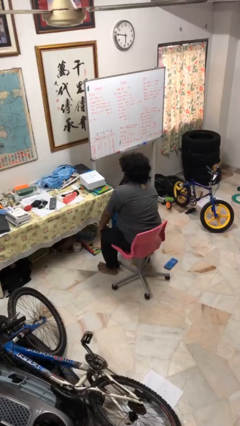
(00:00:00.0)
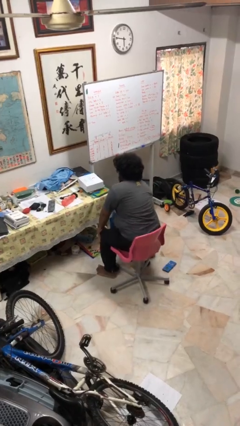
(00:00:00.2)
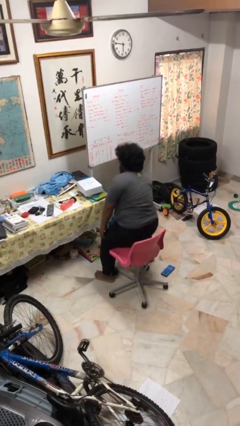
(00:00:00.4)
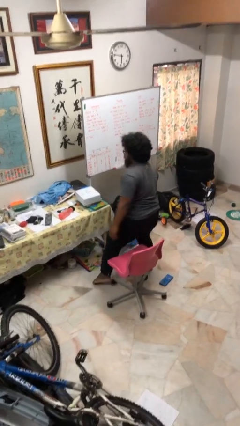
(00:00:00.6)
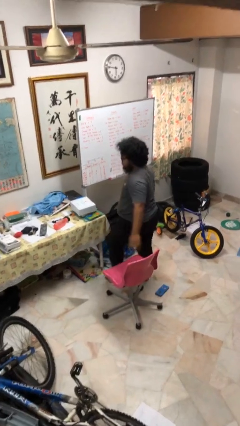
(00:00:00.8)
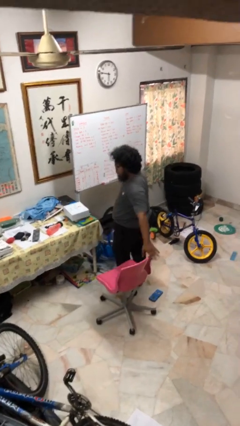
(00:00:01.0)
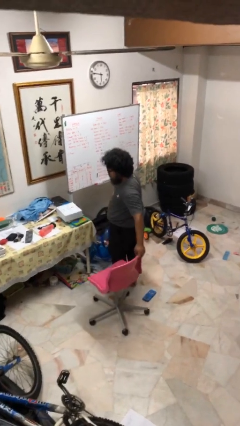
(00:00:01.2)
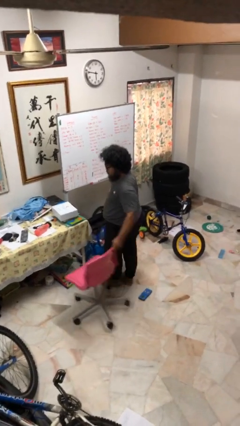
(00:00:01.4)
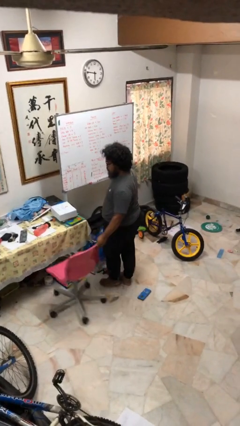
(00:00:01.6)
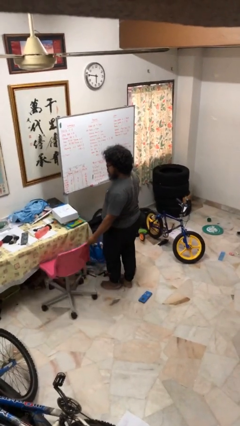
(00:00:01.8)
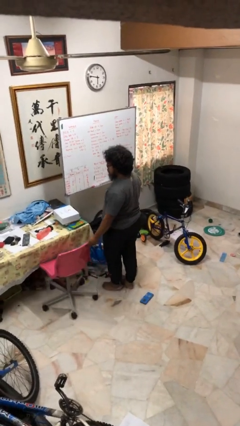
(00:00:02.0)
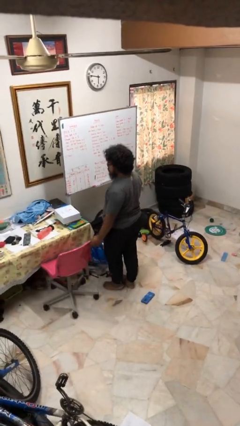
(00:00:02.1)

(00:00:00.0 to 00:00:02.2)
person stands up

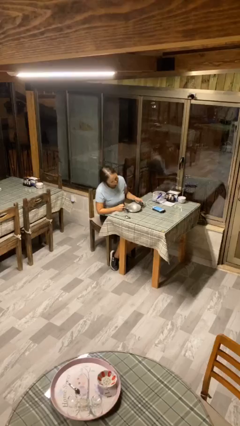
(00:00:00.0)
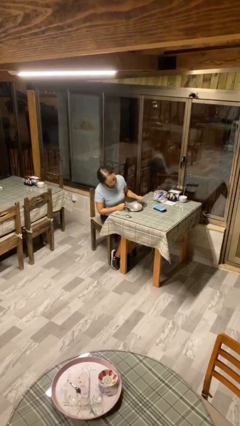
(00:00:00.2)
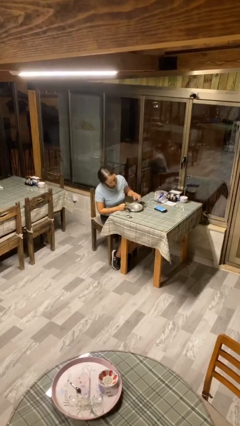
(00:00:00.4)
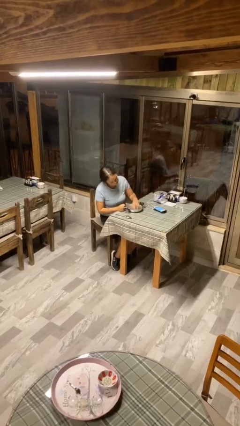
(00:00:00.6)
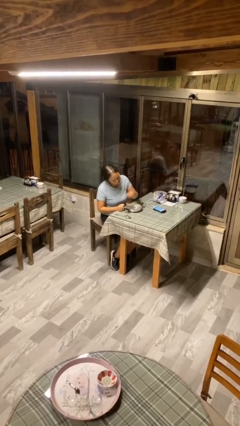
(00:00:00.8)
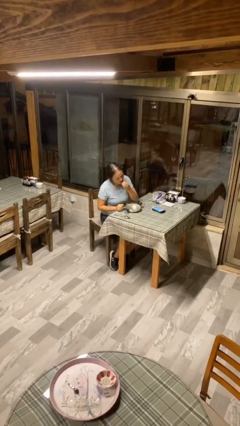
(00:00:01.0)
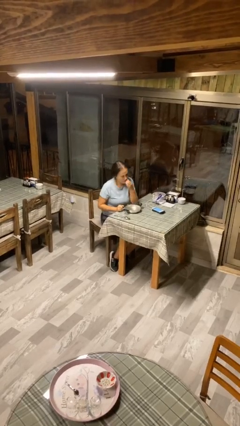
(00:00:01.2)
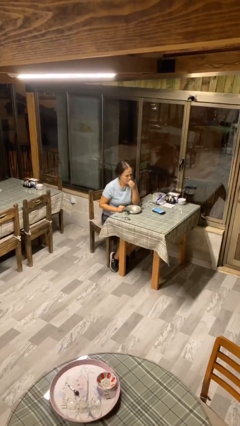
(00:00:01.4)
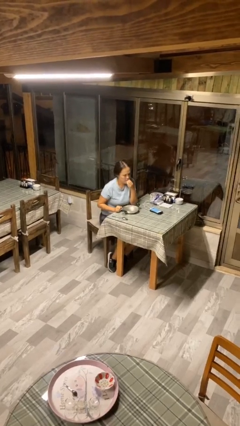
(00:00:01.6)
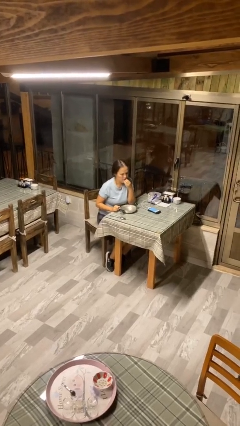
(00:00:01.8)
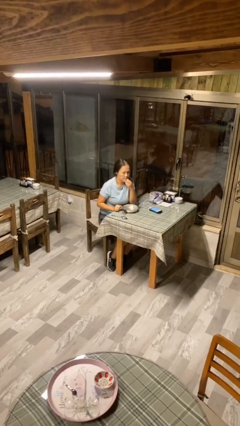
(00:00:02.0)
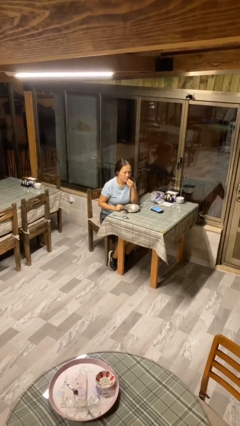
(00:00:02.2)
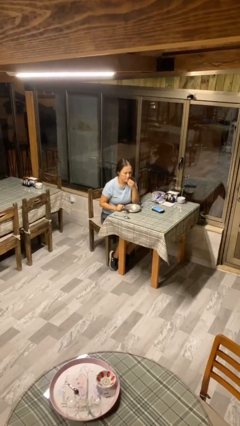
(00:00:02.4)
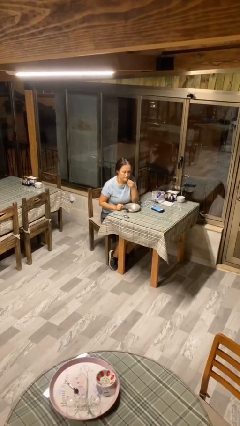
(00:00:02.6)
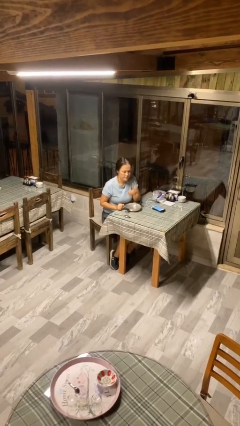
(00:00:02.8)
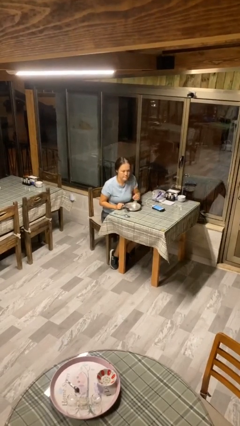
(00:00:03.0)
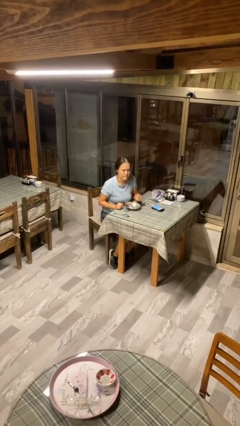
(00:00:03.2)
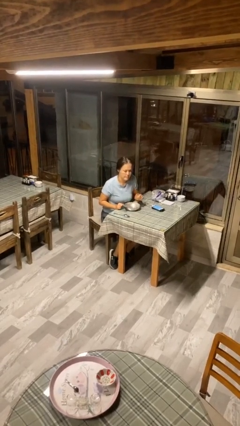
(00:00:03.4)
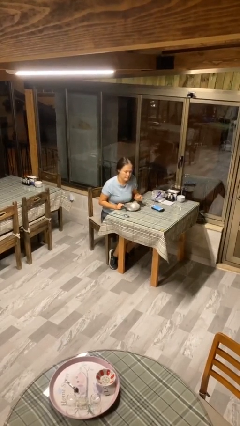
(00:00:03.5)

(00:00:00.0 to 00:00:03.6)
person eats with hands

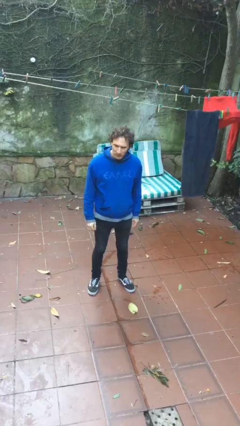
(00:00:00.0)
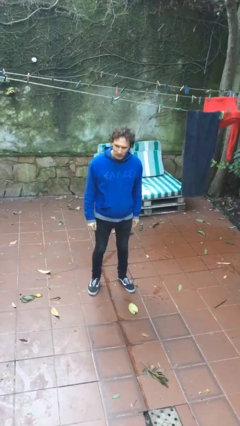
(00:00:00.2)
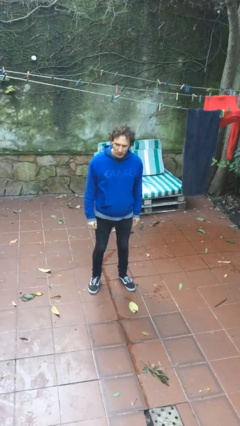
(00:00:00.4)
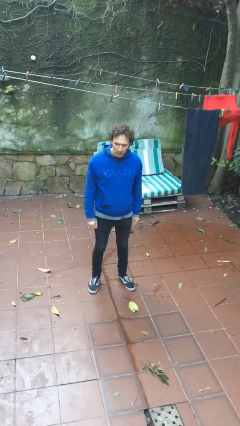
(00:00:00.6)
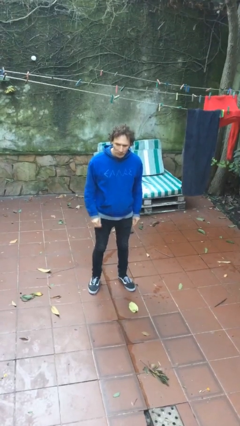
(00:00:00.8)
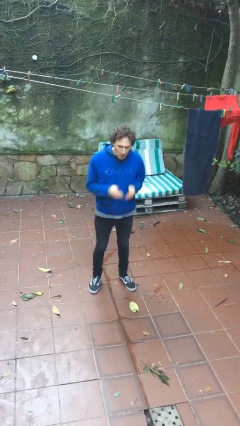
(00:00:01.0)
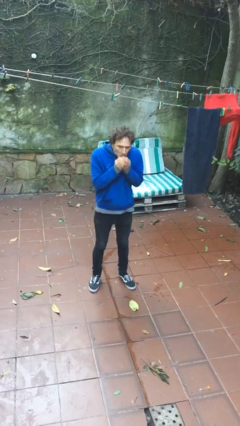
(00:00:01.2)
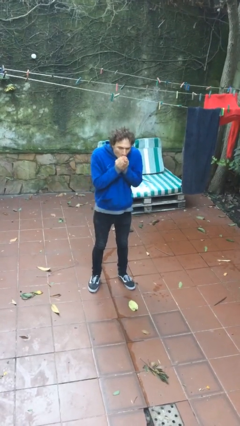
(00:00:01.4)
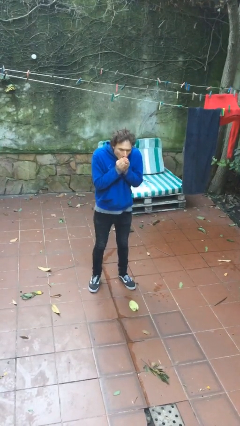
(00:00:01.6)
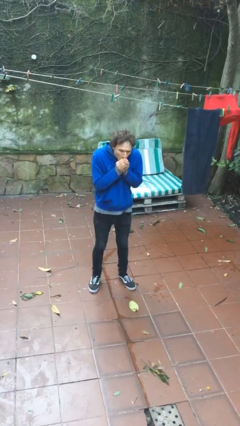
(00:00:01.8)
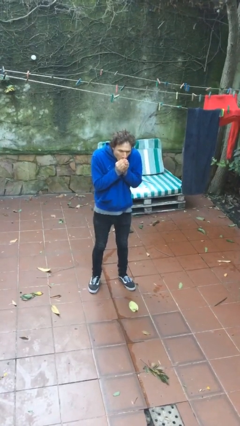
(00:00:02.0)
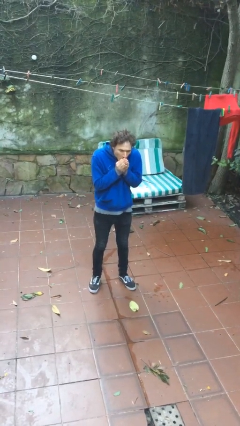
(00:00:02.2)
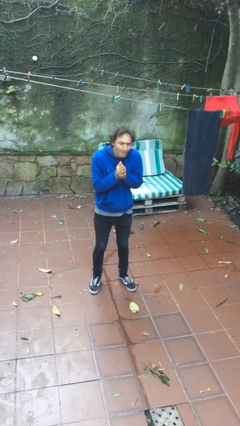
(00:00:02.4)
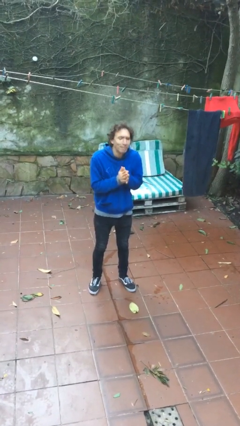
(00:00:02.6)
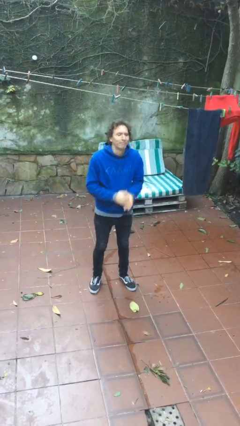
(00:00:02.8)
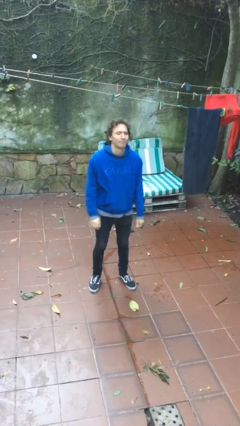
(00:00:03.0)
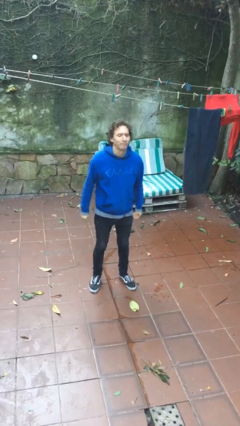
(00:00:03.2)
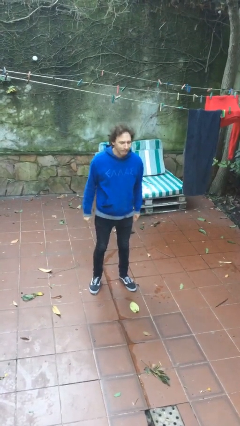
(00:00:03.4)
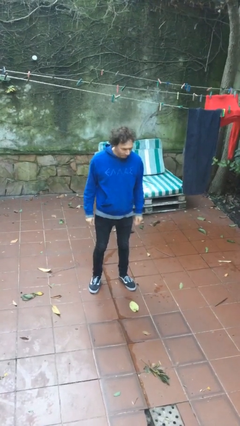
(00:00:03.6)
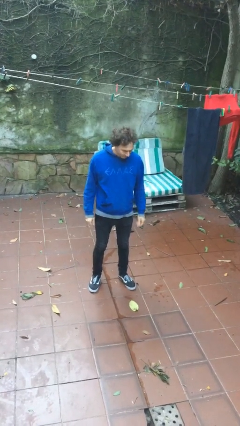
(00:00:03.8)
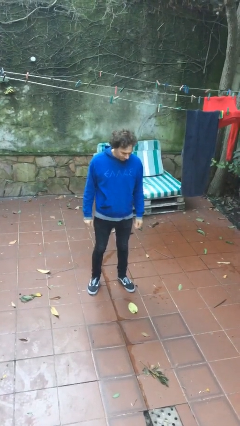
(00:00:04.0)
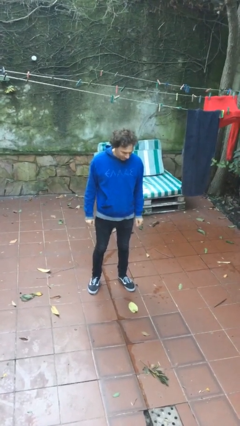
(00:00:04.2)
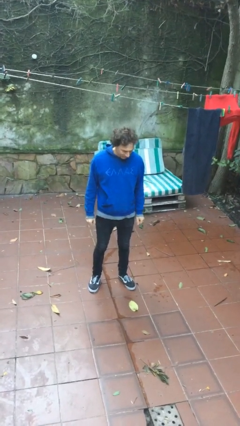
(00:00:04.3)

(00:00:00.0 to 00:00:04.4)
person blows into hands

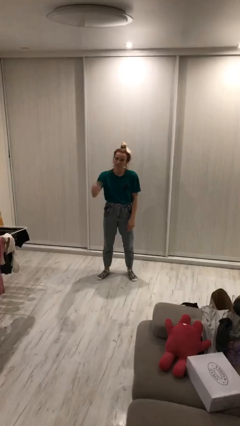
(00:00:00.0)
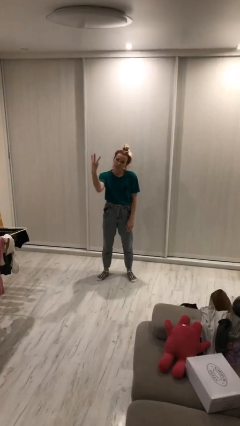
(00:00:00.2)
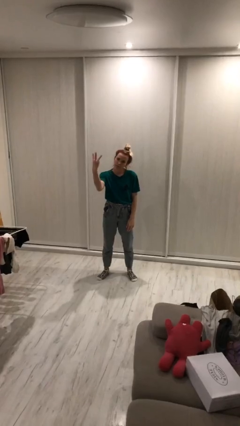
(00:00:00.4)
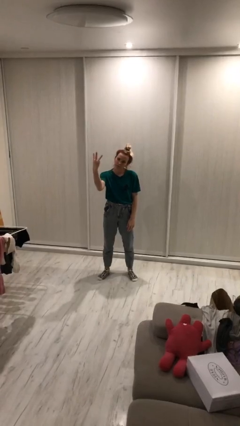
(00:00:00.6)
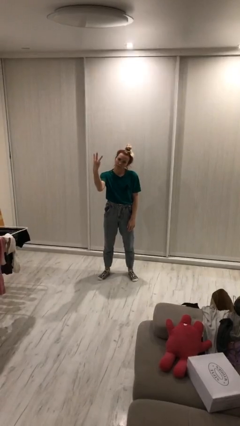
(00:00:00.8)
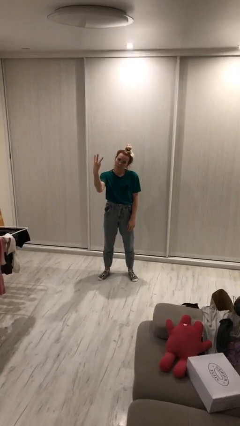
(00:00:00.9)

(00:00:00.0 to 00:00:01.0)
person gestures number three

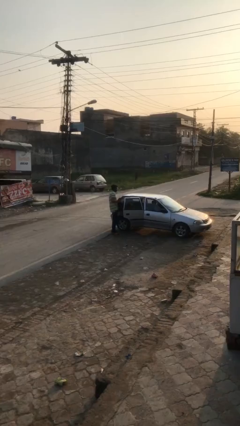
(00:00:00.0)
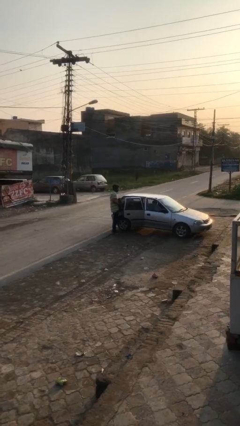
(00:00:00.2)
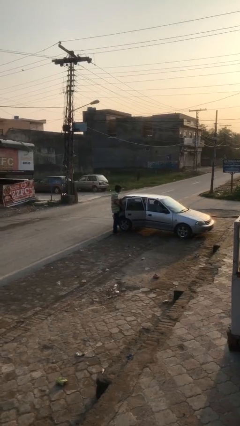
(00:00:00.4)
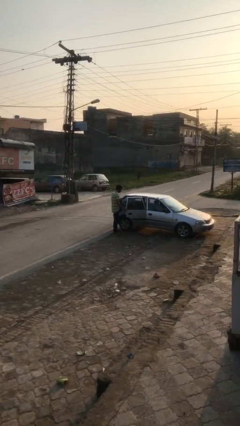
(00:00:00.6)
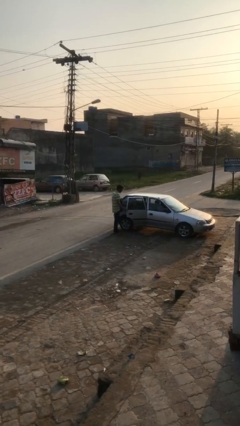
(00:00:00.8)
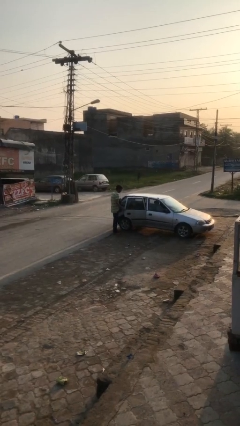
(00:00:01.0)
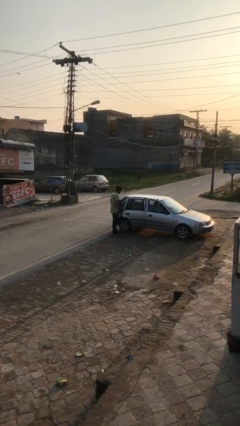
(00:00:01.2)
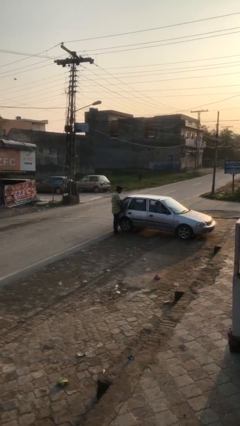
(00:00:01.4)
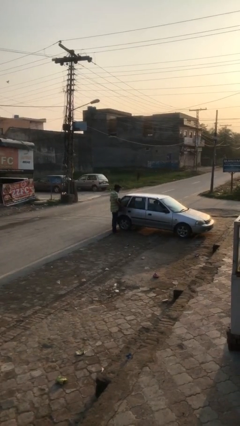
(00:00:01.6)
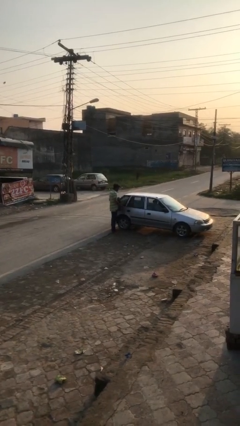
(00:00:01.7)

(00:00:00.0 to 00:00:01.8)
person closes car door

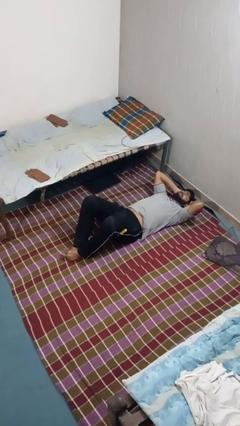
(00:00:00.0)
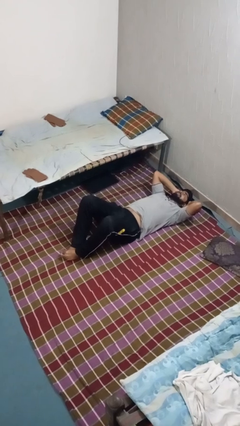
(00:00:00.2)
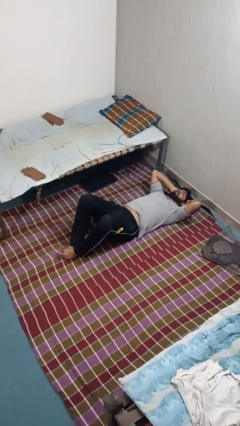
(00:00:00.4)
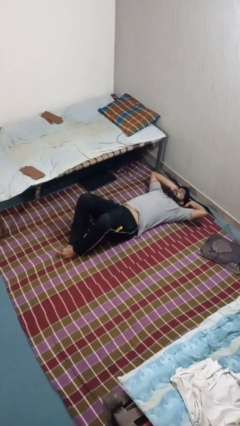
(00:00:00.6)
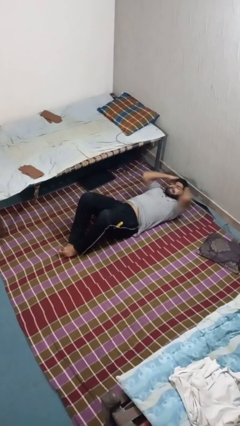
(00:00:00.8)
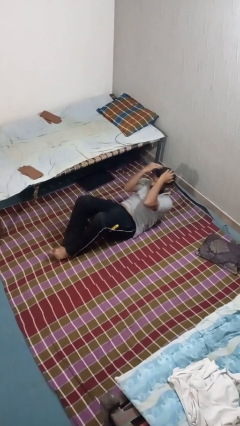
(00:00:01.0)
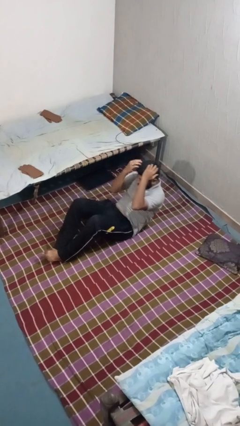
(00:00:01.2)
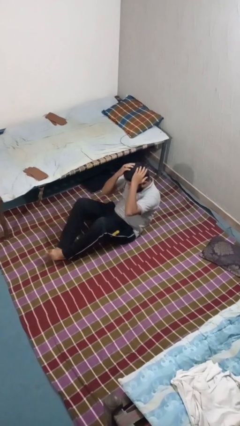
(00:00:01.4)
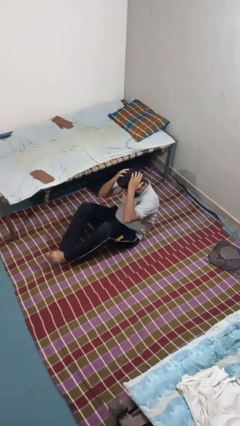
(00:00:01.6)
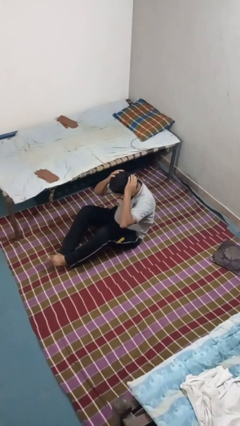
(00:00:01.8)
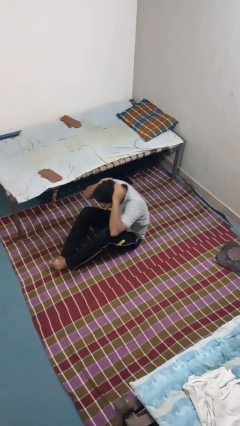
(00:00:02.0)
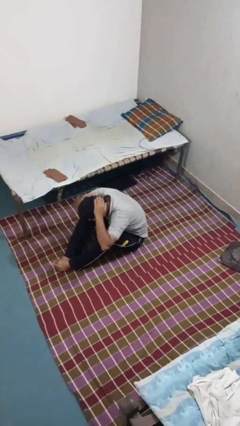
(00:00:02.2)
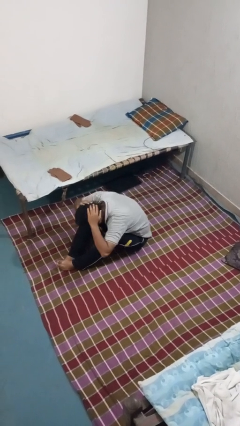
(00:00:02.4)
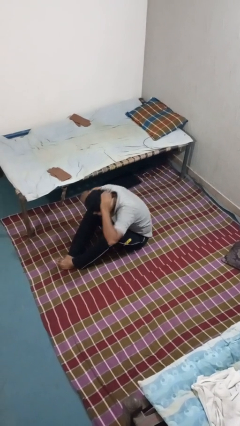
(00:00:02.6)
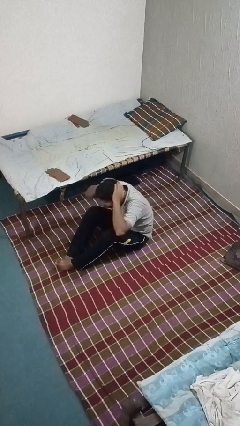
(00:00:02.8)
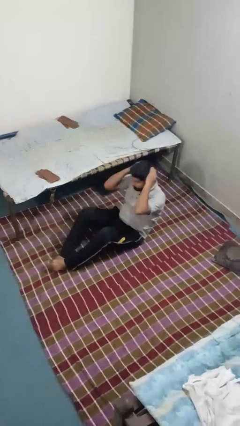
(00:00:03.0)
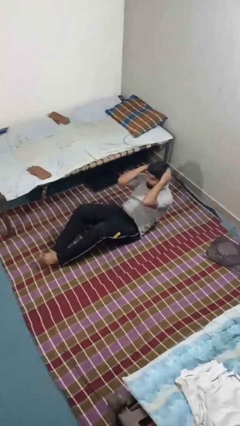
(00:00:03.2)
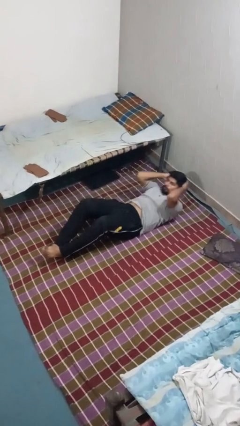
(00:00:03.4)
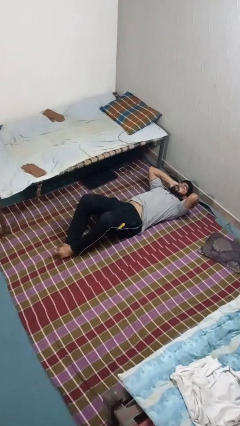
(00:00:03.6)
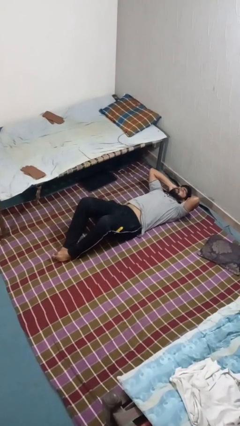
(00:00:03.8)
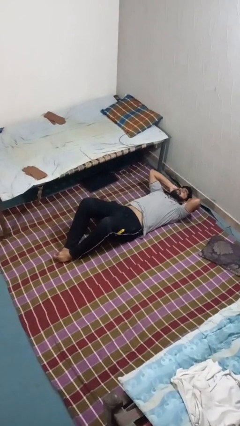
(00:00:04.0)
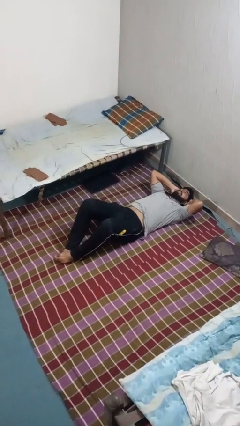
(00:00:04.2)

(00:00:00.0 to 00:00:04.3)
person exercises with situp
